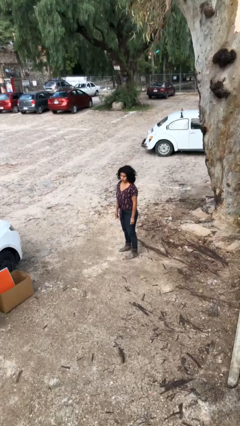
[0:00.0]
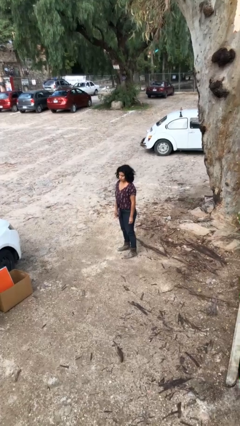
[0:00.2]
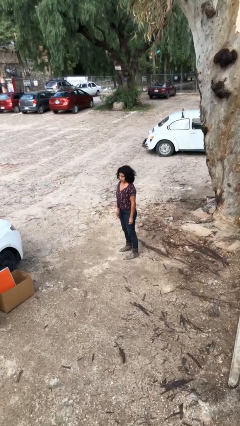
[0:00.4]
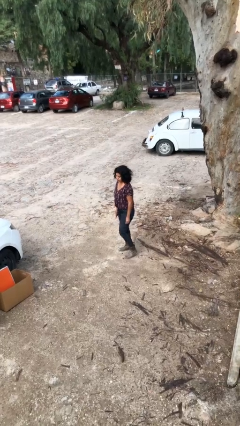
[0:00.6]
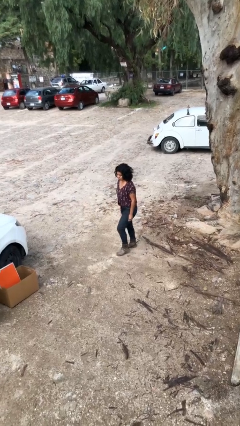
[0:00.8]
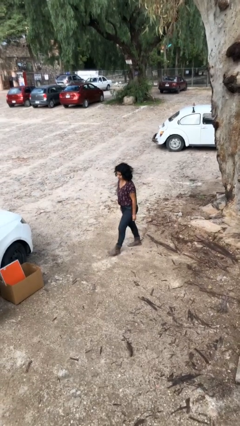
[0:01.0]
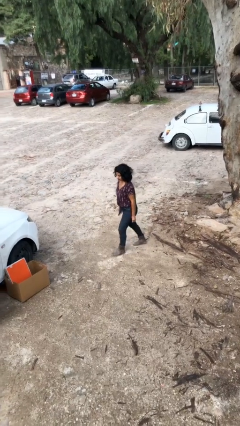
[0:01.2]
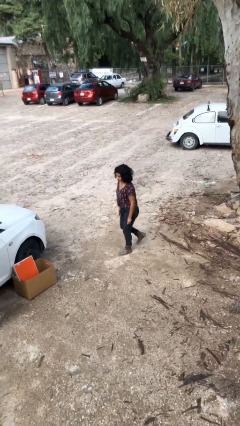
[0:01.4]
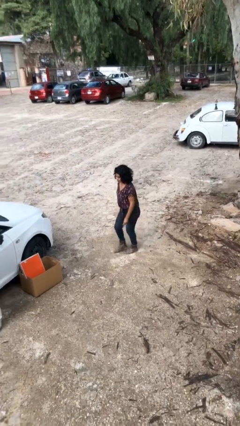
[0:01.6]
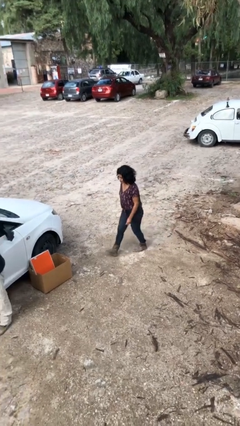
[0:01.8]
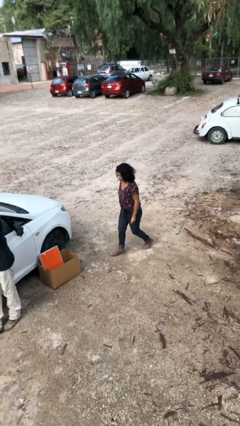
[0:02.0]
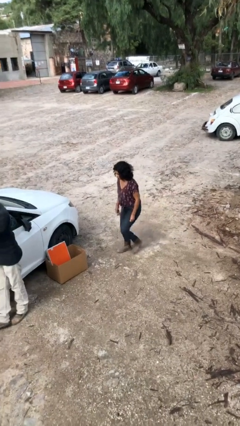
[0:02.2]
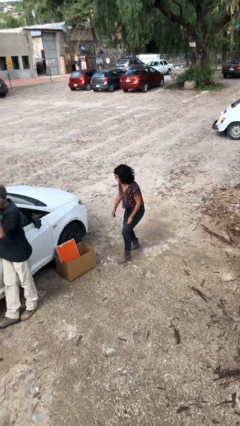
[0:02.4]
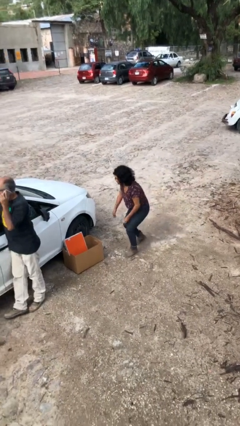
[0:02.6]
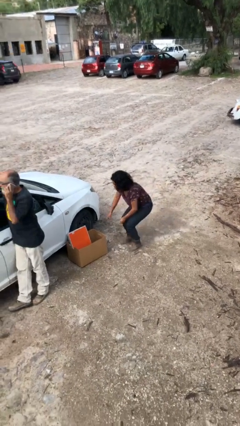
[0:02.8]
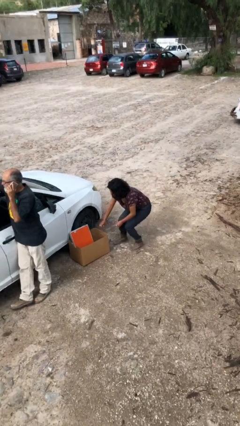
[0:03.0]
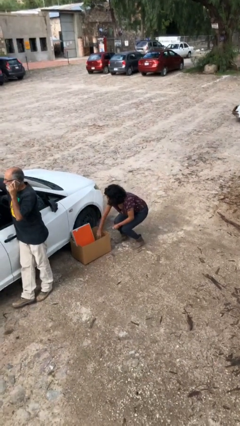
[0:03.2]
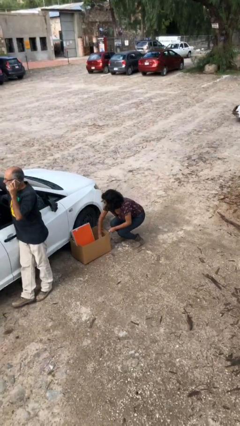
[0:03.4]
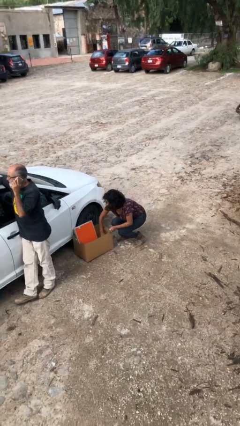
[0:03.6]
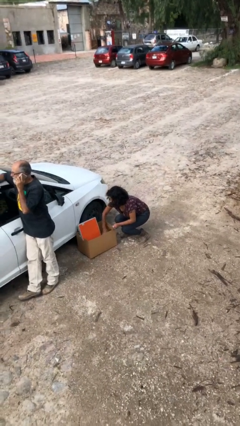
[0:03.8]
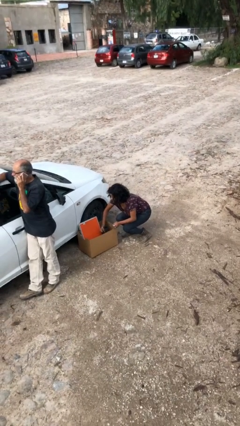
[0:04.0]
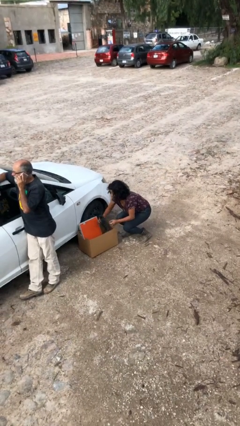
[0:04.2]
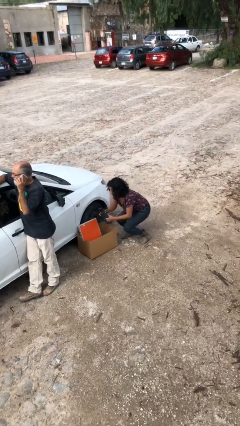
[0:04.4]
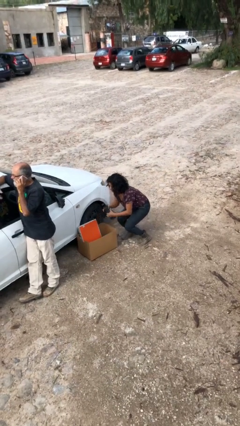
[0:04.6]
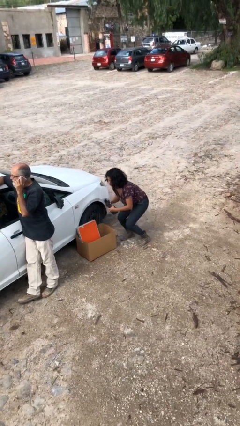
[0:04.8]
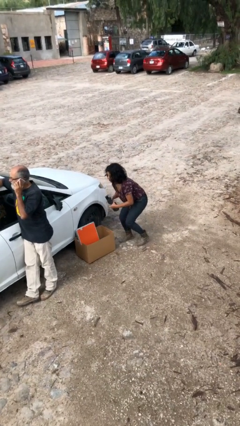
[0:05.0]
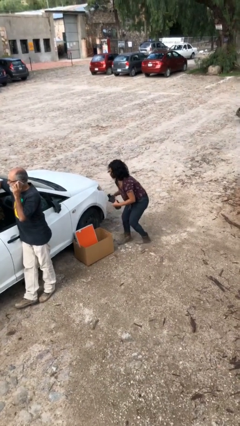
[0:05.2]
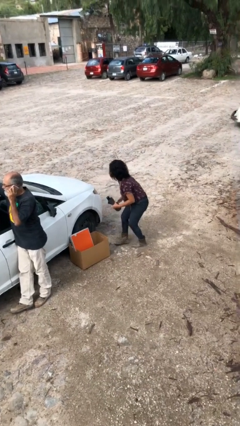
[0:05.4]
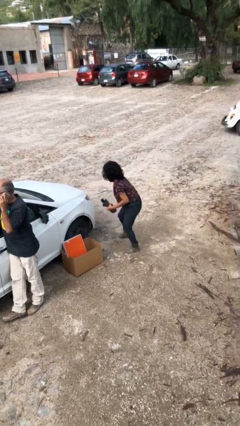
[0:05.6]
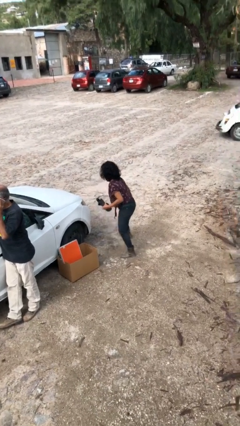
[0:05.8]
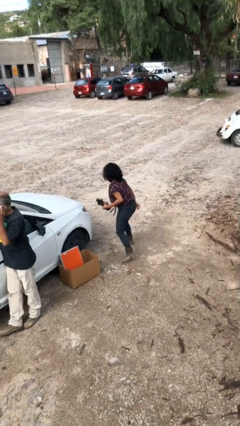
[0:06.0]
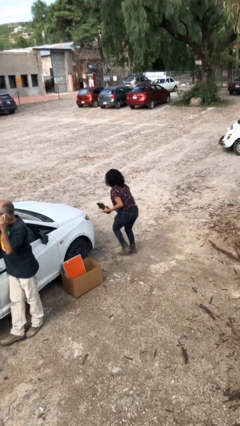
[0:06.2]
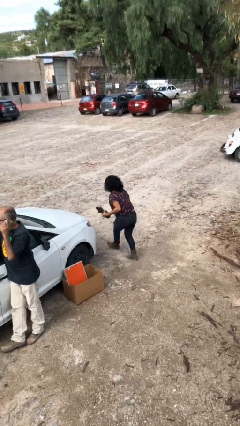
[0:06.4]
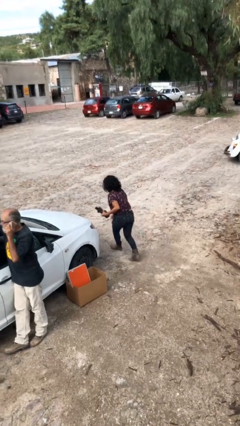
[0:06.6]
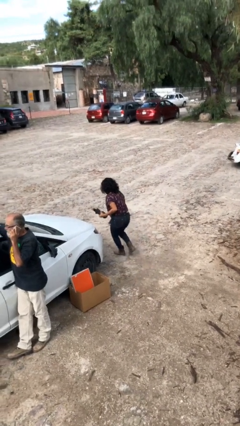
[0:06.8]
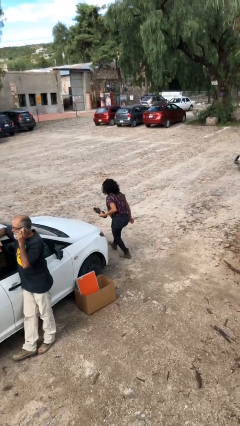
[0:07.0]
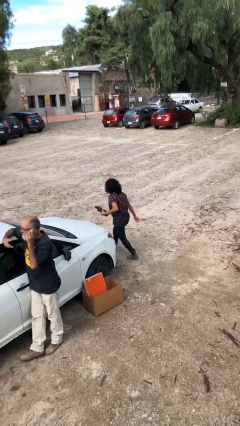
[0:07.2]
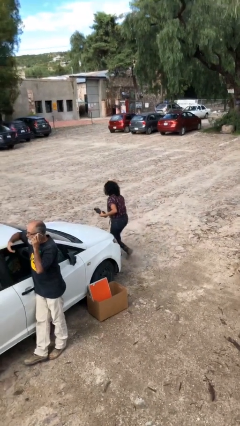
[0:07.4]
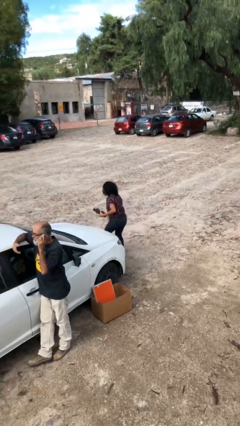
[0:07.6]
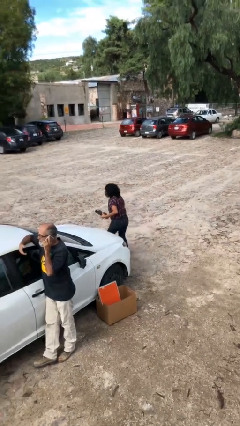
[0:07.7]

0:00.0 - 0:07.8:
person steals object from person

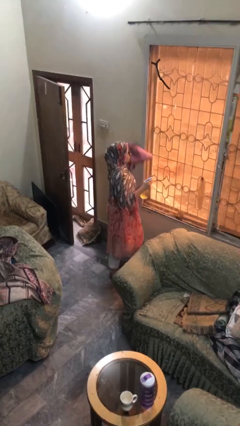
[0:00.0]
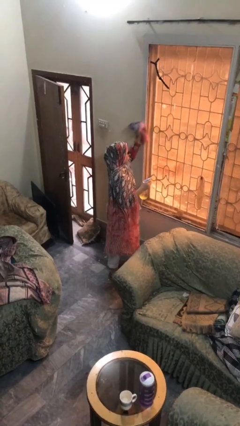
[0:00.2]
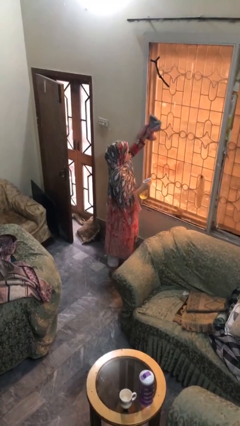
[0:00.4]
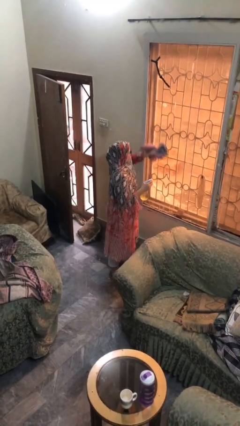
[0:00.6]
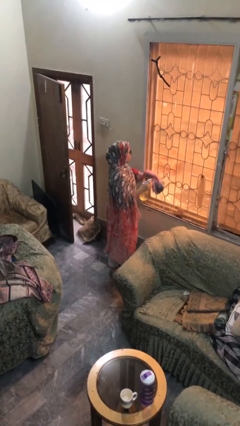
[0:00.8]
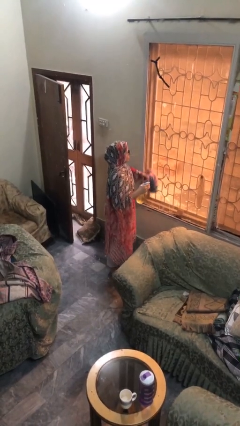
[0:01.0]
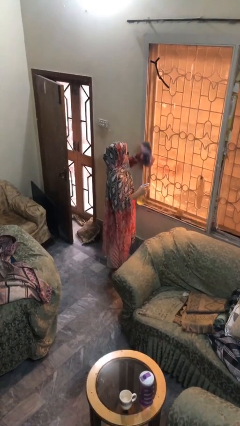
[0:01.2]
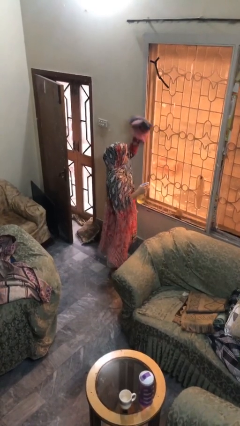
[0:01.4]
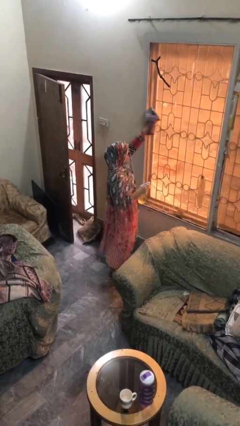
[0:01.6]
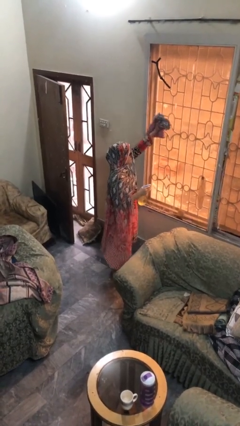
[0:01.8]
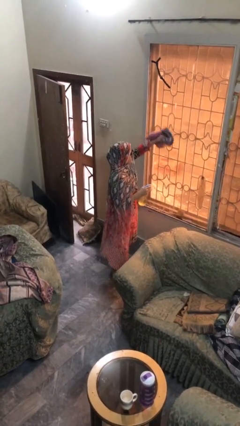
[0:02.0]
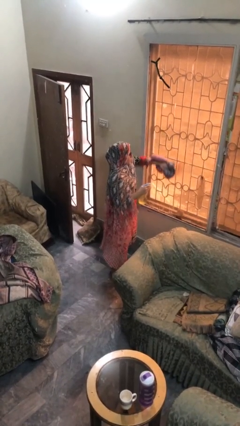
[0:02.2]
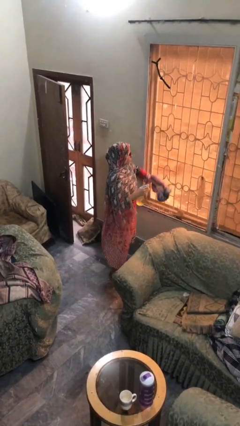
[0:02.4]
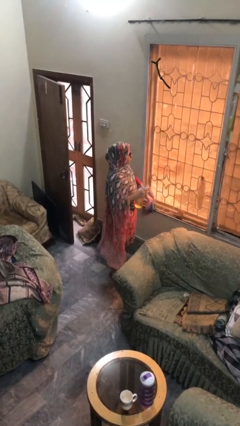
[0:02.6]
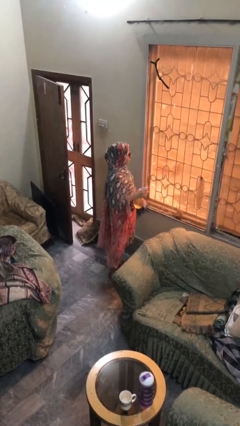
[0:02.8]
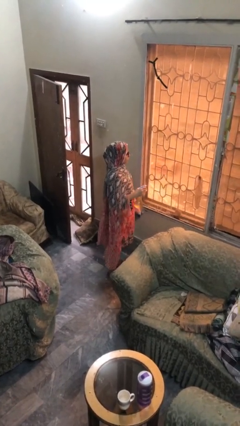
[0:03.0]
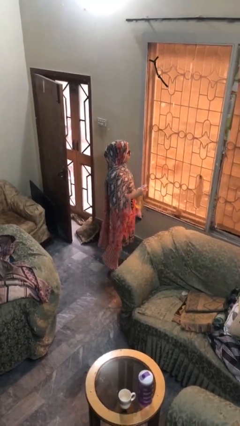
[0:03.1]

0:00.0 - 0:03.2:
person washes window

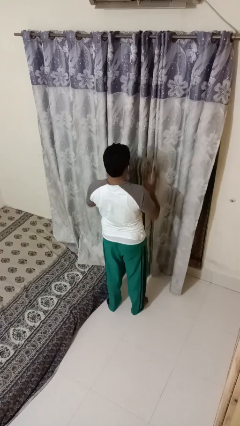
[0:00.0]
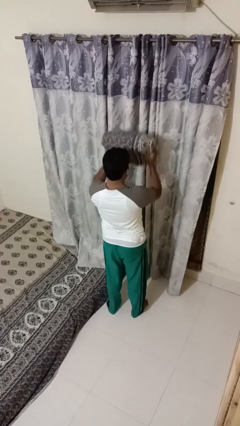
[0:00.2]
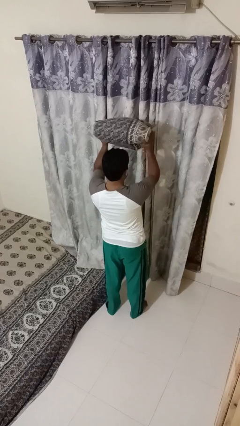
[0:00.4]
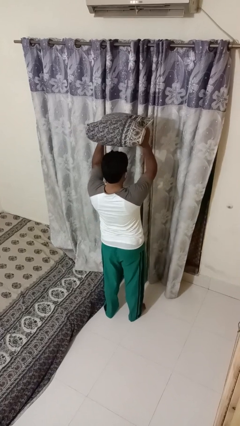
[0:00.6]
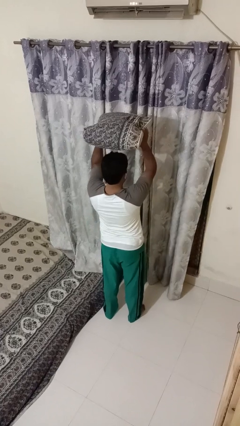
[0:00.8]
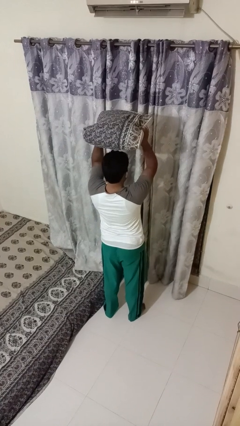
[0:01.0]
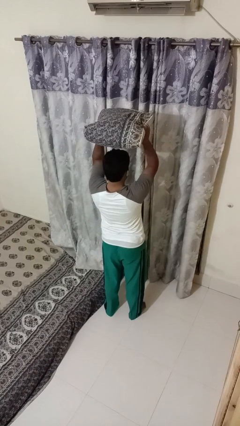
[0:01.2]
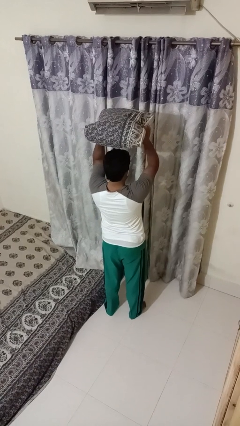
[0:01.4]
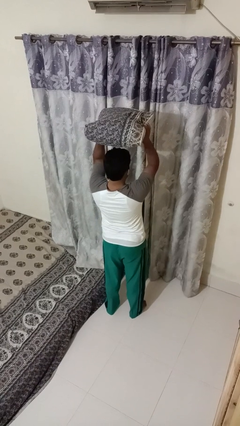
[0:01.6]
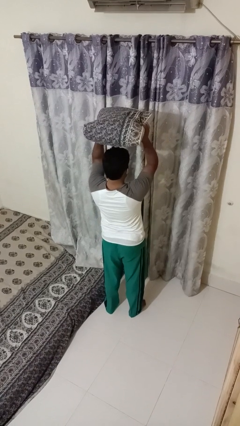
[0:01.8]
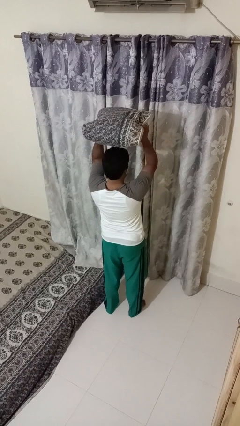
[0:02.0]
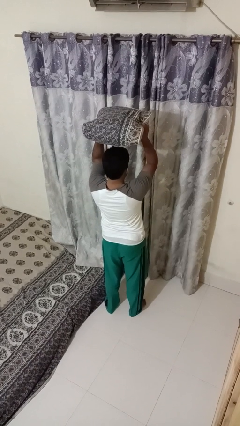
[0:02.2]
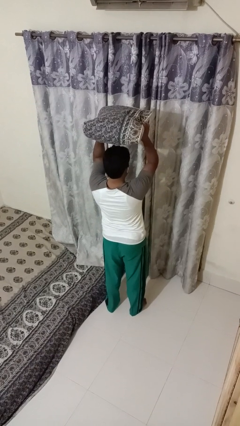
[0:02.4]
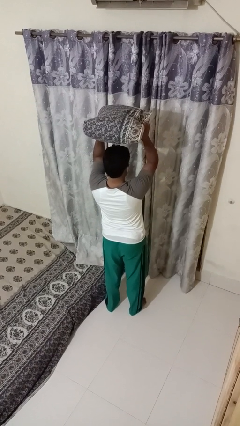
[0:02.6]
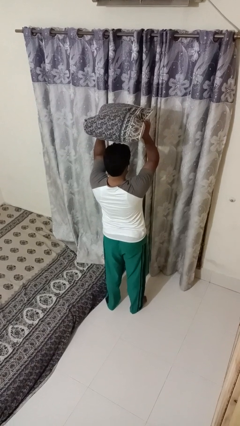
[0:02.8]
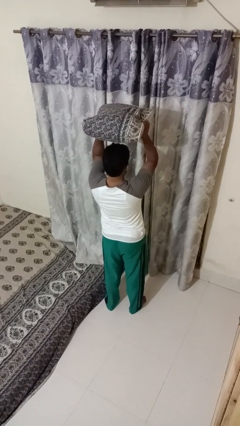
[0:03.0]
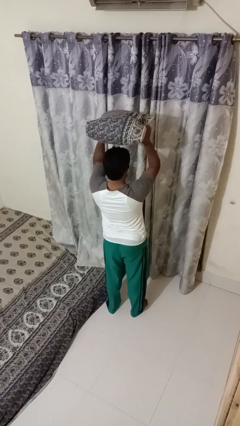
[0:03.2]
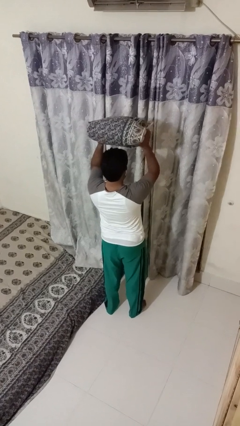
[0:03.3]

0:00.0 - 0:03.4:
person holds object above head

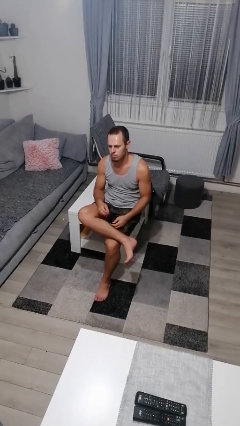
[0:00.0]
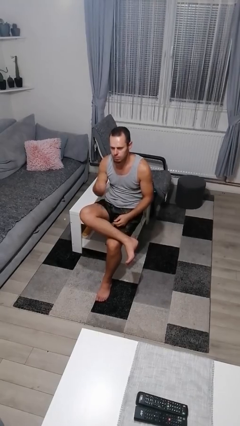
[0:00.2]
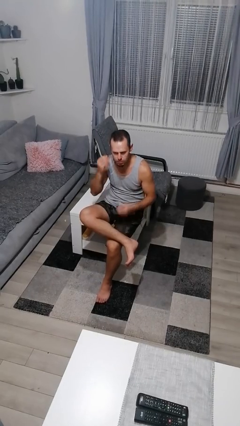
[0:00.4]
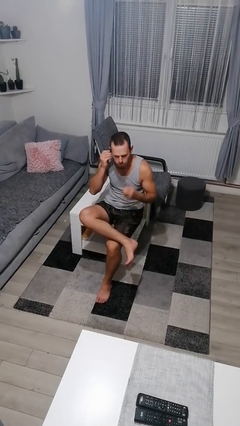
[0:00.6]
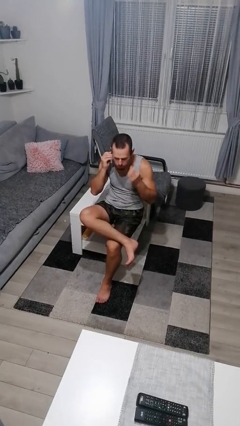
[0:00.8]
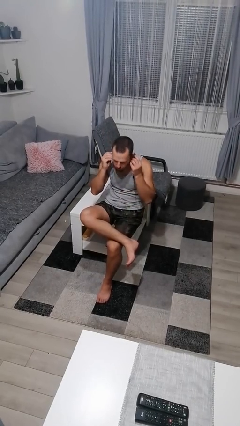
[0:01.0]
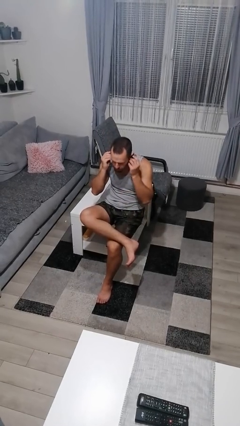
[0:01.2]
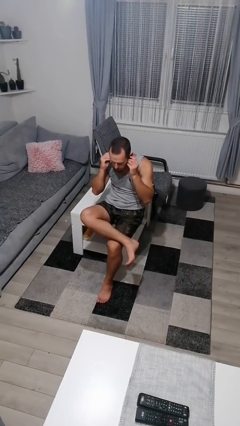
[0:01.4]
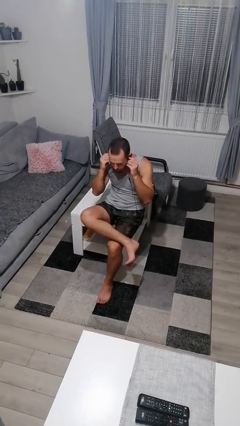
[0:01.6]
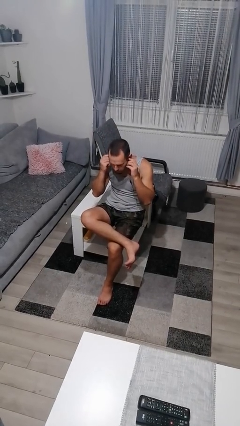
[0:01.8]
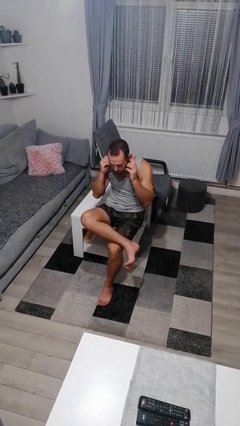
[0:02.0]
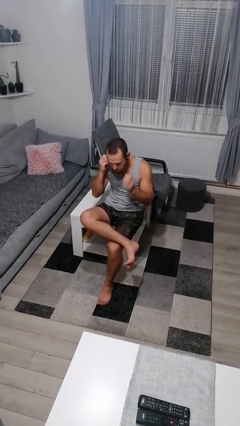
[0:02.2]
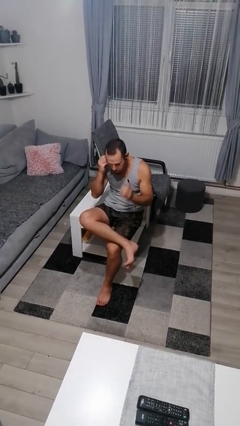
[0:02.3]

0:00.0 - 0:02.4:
person puts on headphones

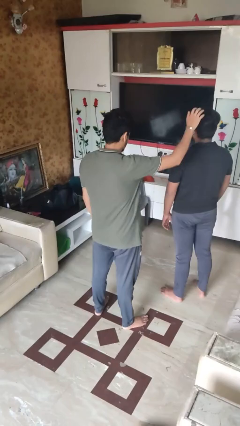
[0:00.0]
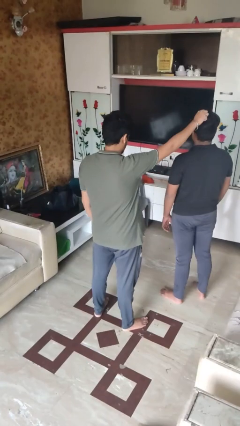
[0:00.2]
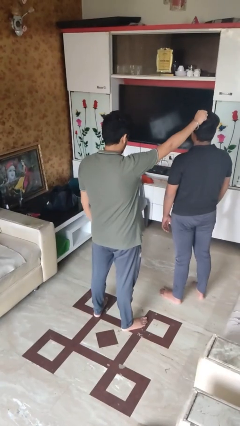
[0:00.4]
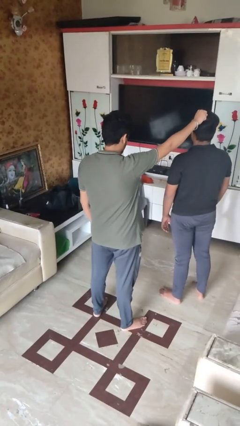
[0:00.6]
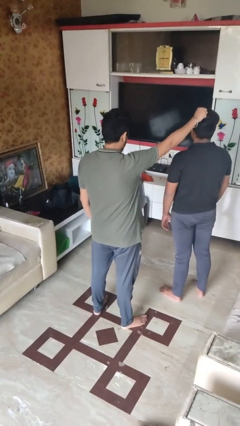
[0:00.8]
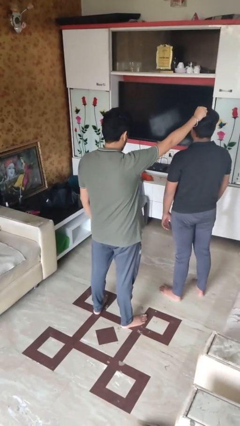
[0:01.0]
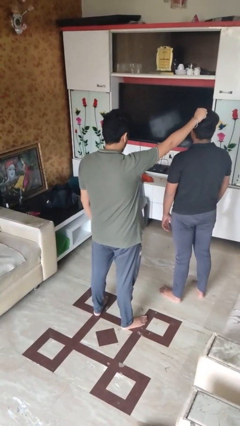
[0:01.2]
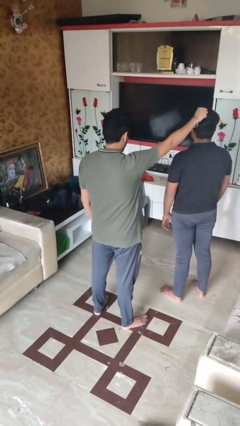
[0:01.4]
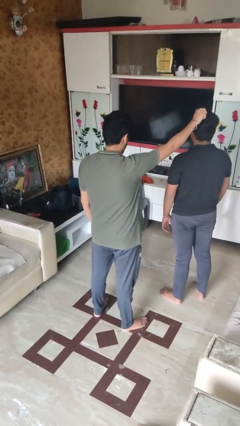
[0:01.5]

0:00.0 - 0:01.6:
person grabs person by hair
